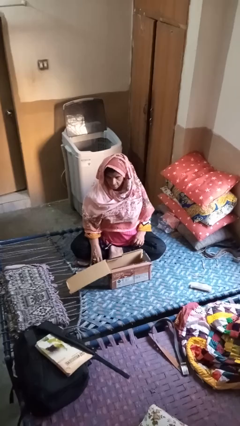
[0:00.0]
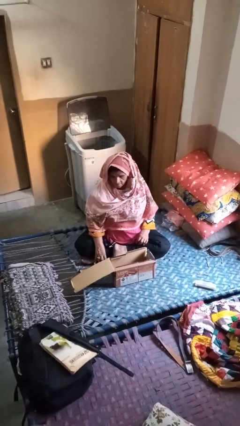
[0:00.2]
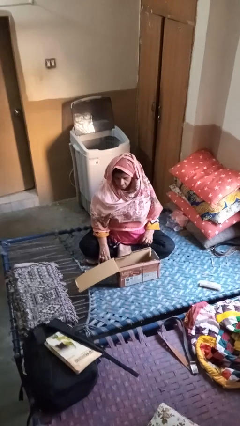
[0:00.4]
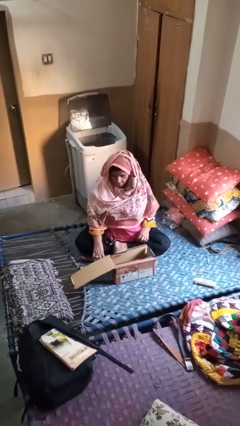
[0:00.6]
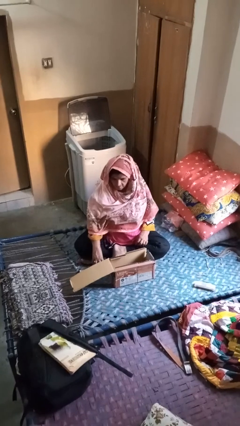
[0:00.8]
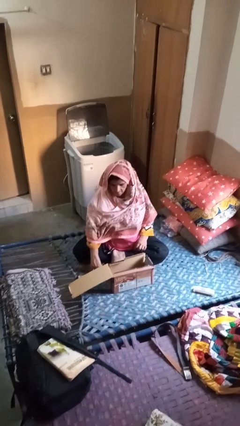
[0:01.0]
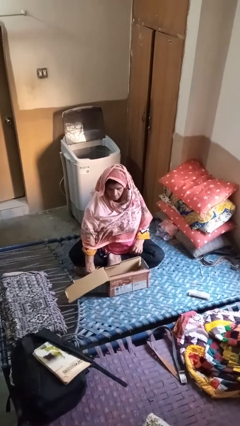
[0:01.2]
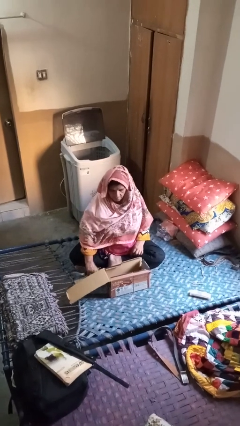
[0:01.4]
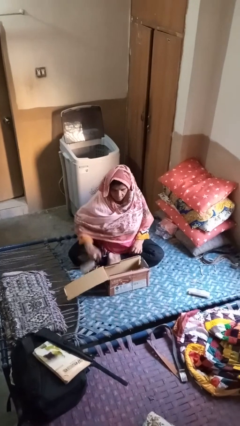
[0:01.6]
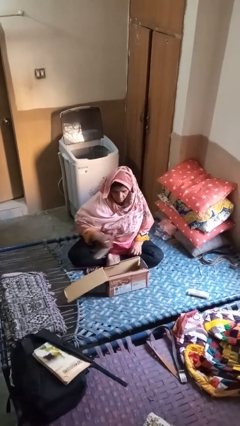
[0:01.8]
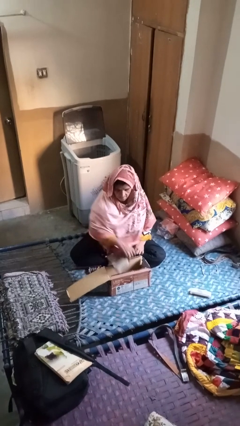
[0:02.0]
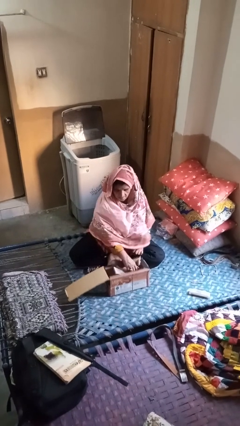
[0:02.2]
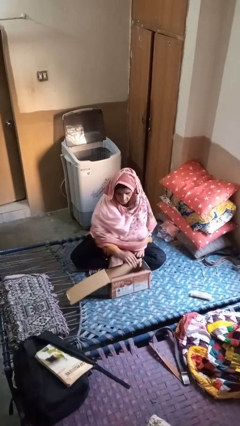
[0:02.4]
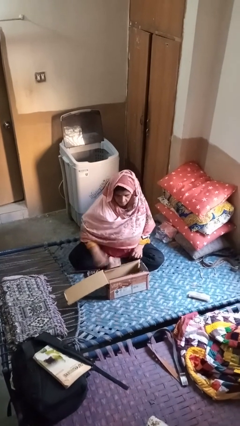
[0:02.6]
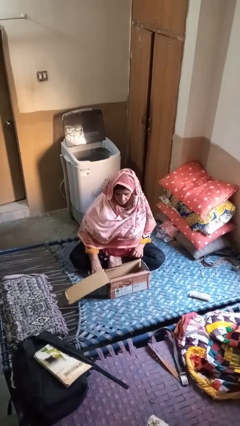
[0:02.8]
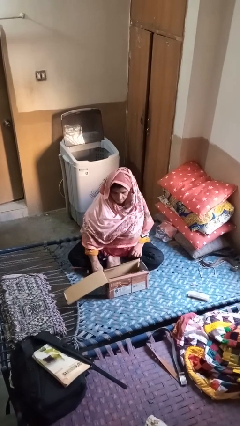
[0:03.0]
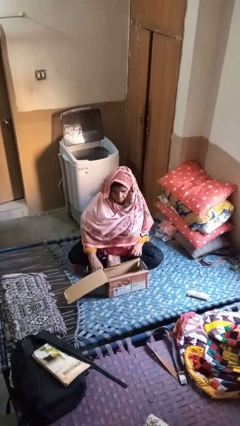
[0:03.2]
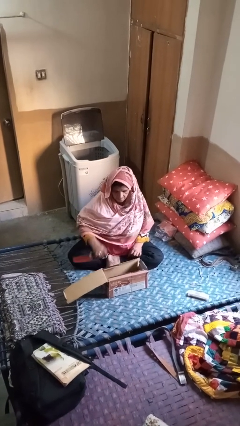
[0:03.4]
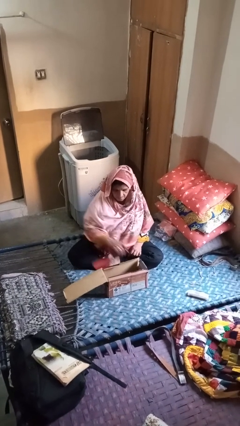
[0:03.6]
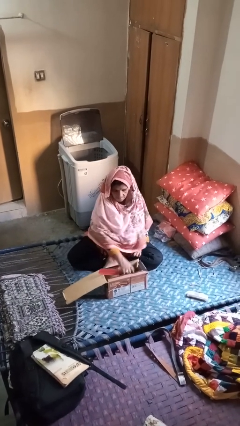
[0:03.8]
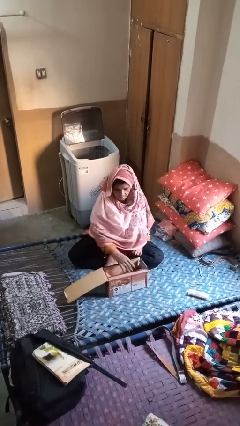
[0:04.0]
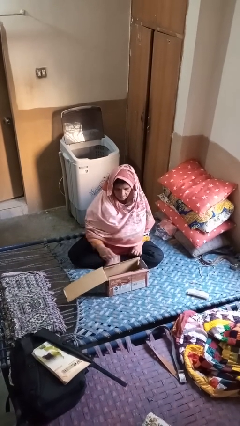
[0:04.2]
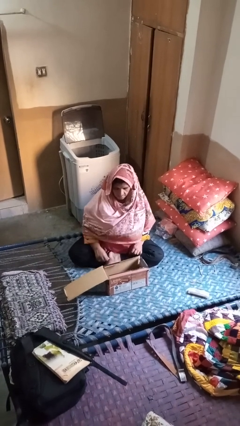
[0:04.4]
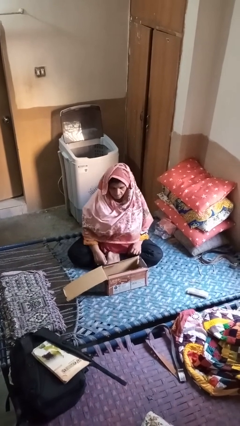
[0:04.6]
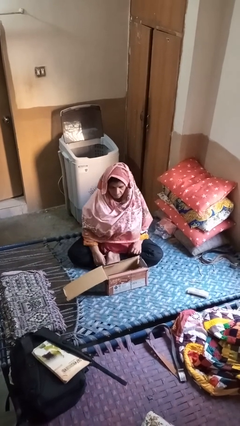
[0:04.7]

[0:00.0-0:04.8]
person puts object into box

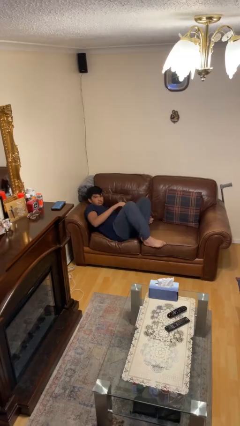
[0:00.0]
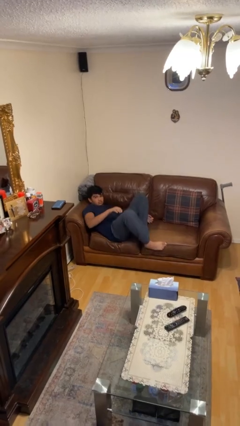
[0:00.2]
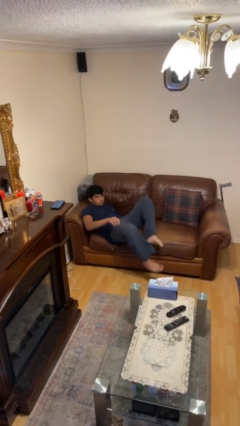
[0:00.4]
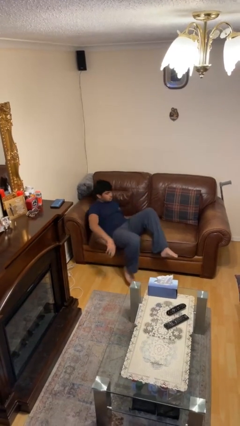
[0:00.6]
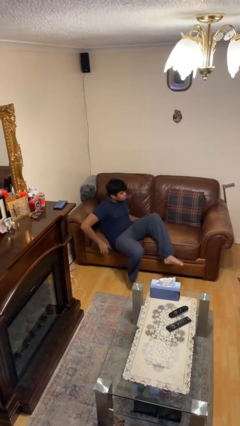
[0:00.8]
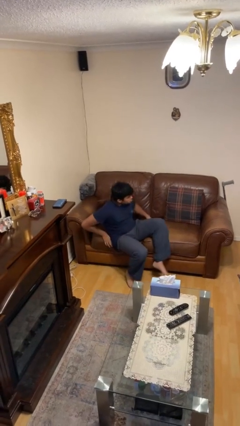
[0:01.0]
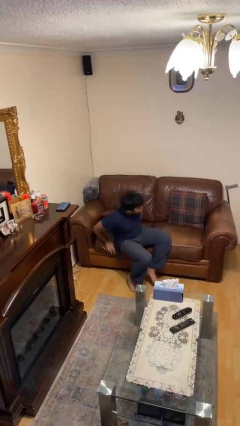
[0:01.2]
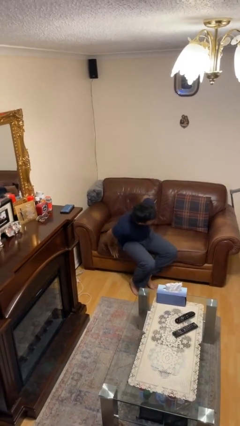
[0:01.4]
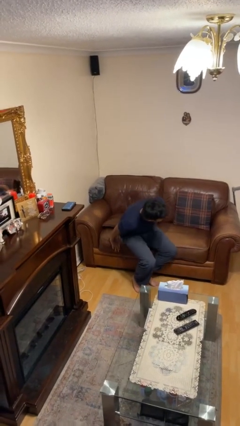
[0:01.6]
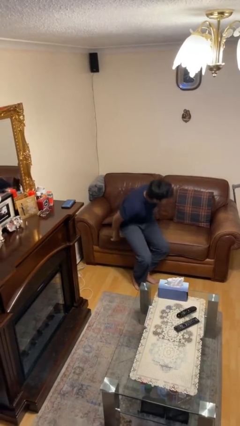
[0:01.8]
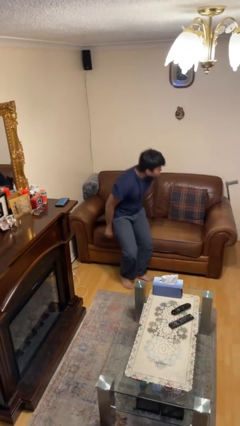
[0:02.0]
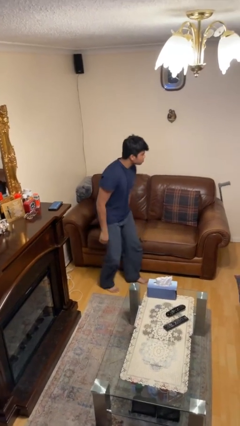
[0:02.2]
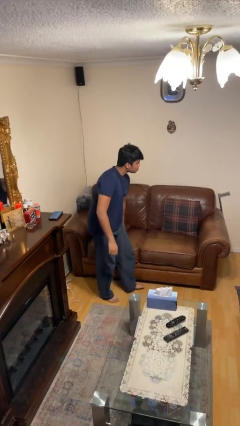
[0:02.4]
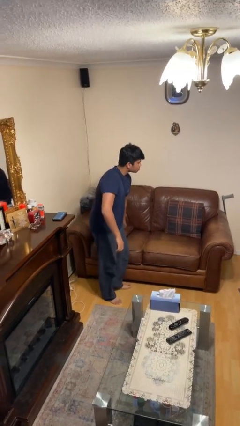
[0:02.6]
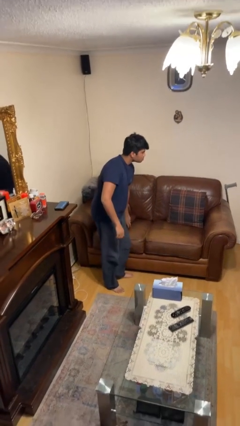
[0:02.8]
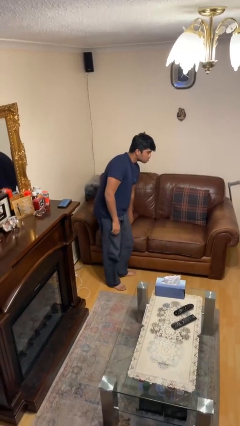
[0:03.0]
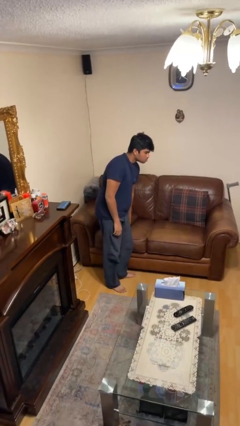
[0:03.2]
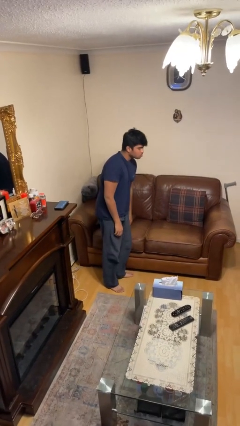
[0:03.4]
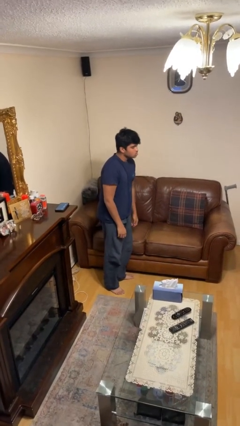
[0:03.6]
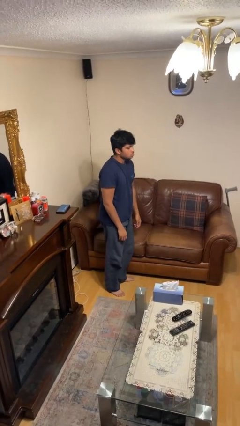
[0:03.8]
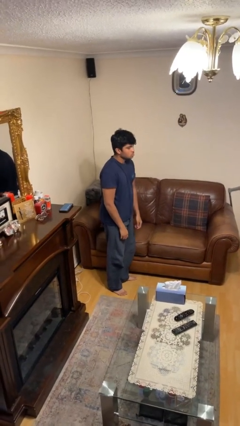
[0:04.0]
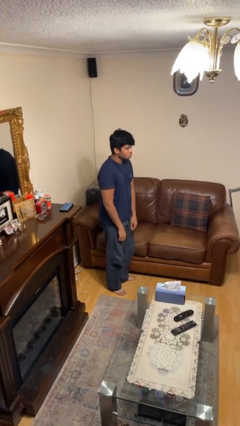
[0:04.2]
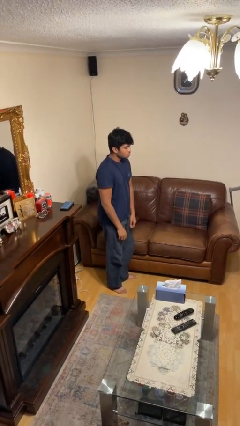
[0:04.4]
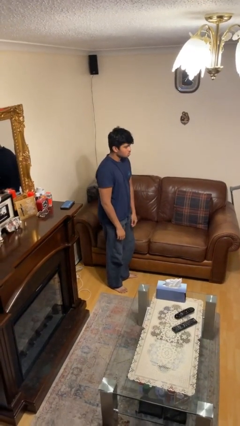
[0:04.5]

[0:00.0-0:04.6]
person stands up

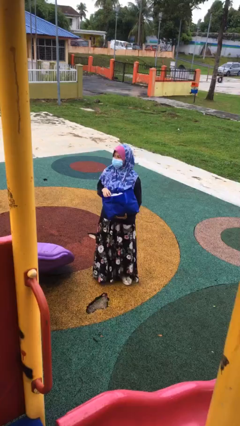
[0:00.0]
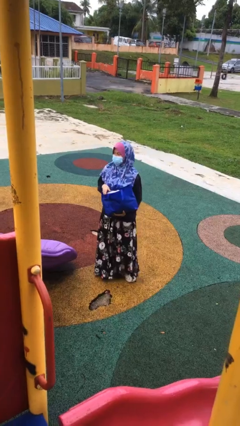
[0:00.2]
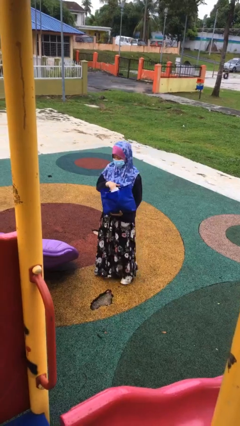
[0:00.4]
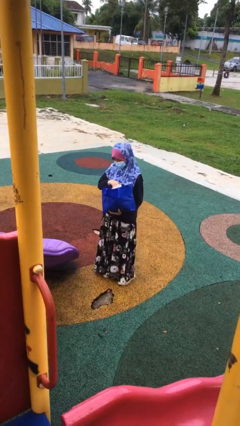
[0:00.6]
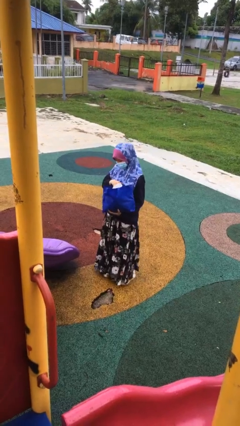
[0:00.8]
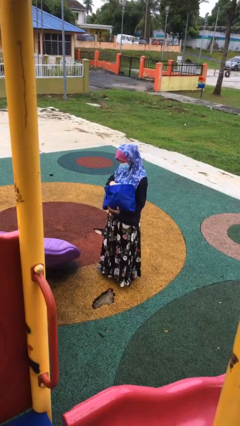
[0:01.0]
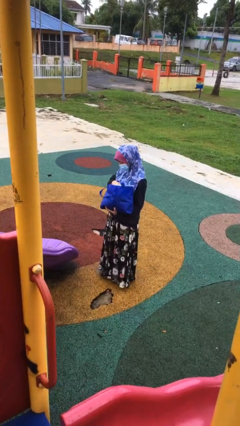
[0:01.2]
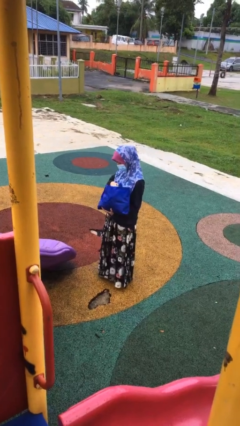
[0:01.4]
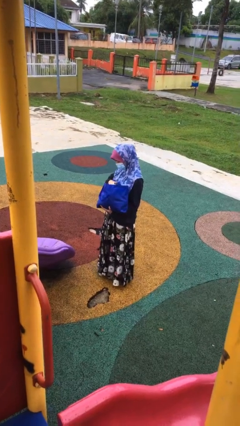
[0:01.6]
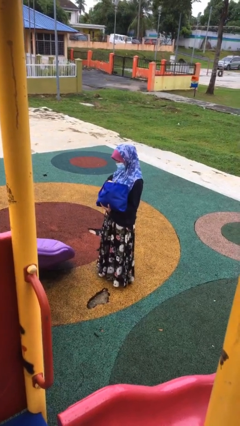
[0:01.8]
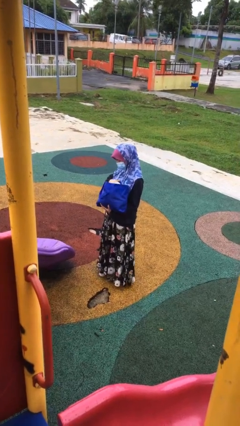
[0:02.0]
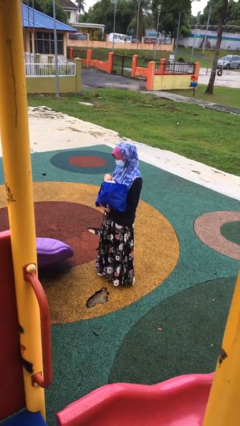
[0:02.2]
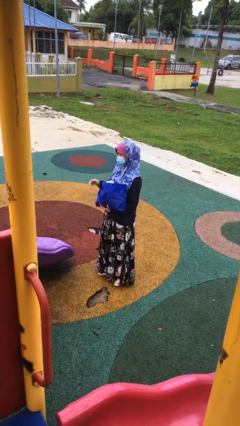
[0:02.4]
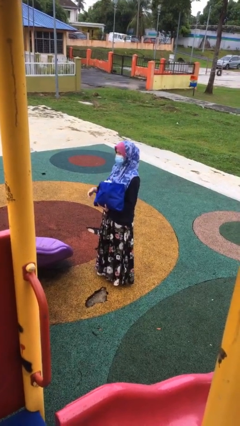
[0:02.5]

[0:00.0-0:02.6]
person searches in bag

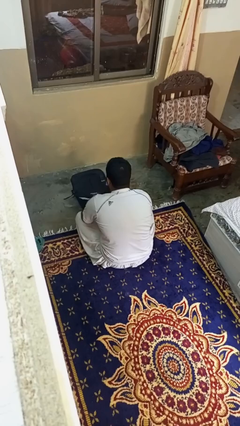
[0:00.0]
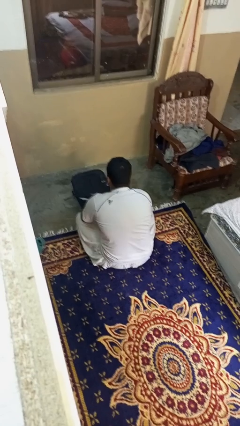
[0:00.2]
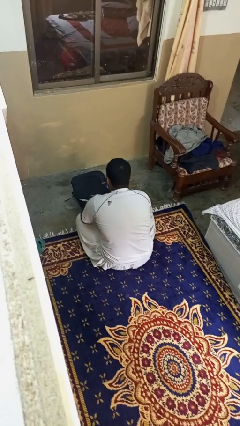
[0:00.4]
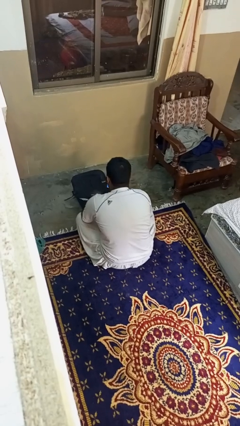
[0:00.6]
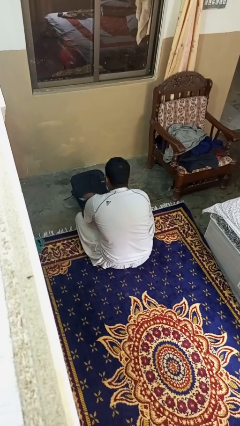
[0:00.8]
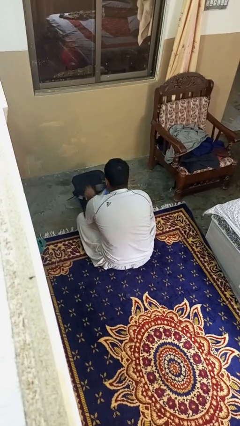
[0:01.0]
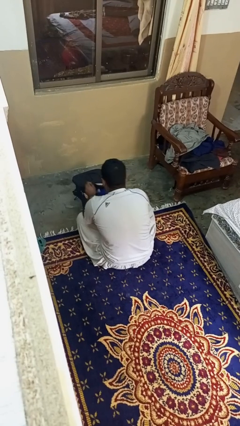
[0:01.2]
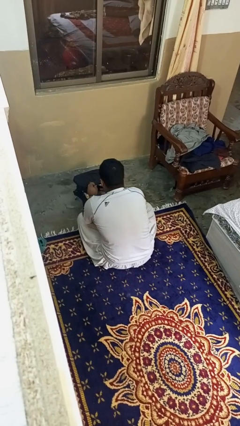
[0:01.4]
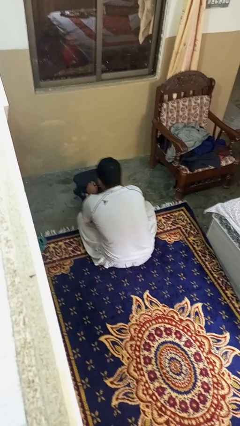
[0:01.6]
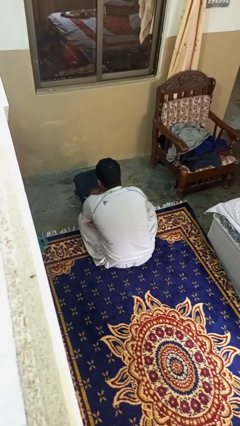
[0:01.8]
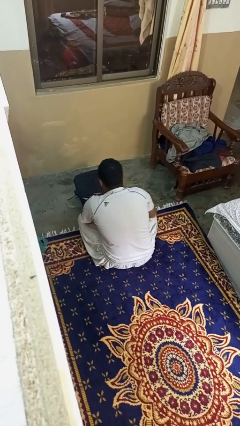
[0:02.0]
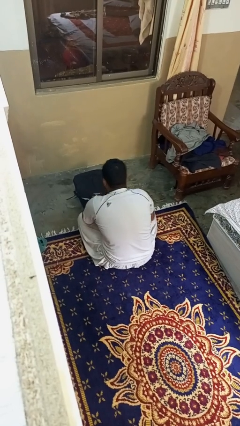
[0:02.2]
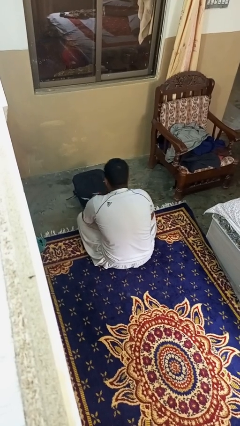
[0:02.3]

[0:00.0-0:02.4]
person puts object into bag

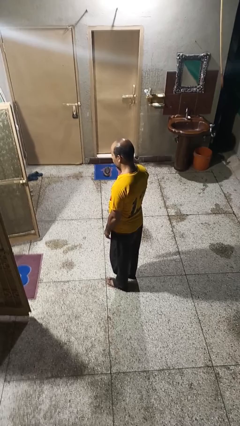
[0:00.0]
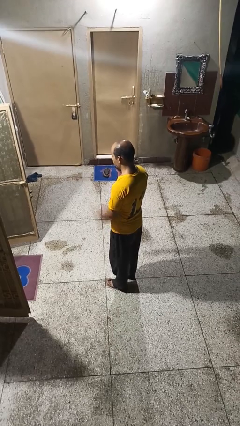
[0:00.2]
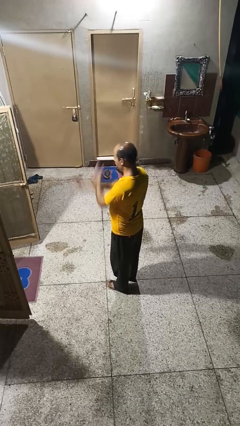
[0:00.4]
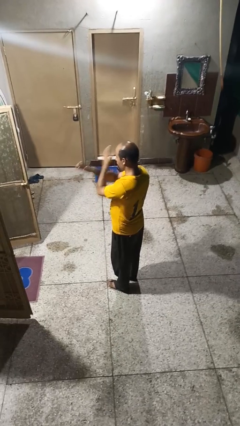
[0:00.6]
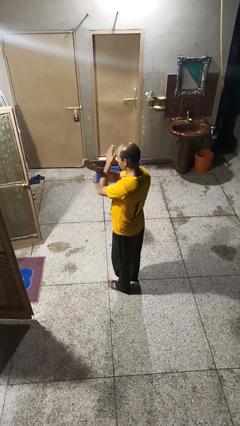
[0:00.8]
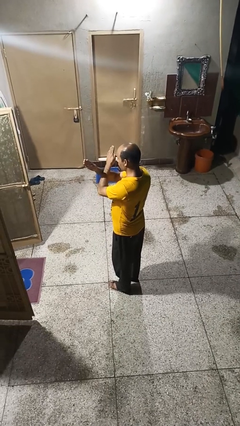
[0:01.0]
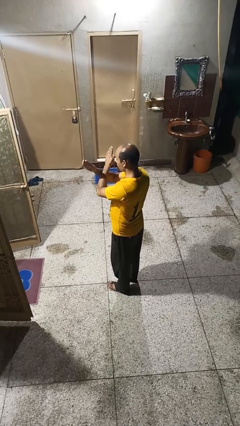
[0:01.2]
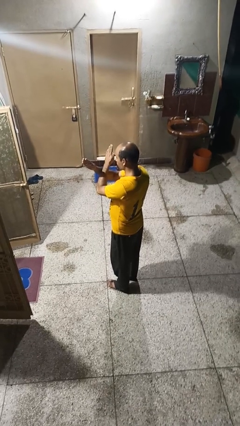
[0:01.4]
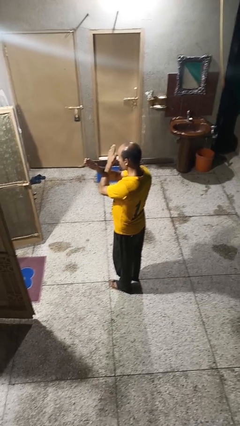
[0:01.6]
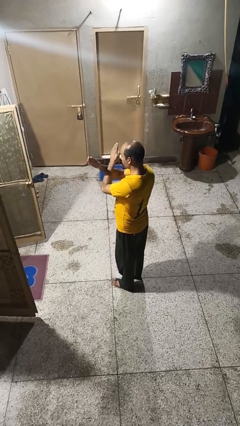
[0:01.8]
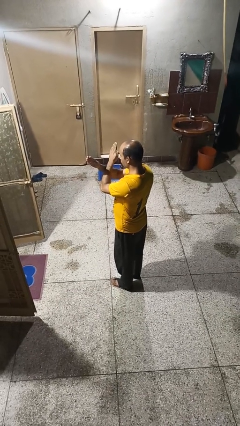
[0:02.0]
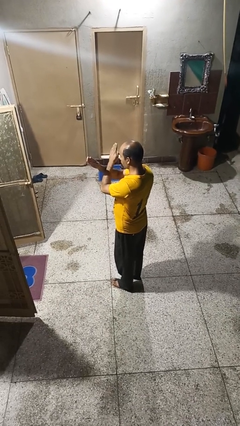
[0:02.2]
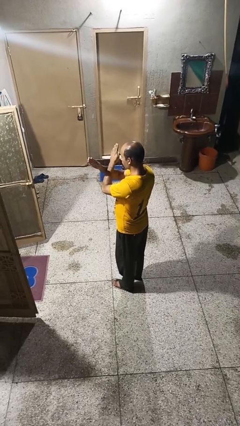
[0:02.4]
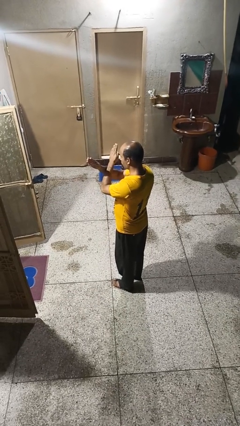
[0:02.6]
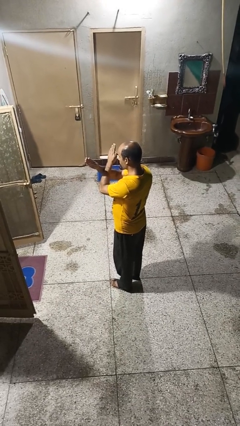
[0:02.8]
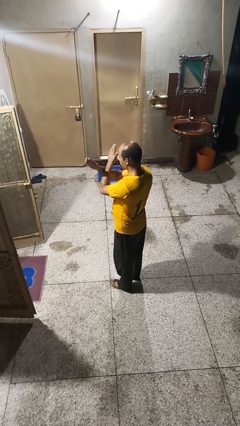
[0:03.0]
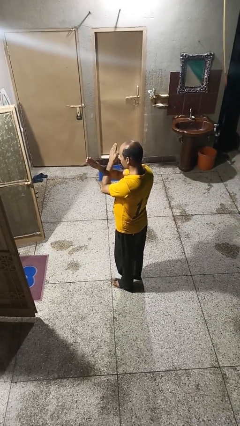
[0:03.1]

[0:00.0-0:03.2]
person gestures arms x
